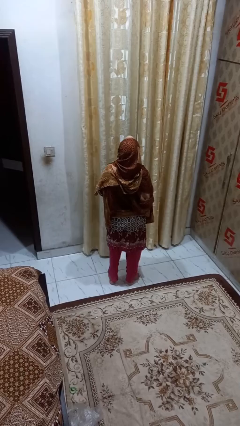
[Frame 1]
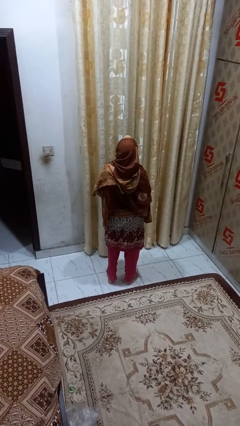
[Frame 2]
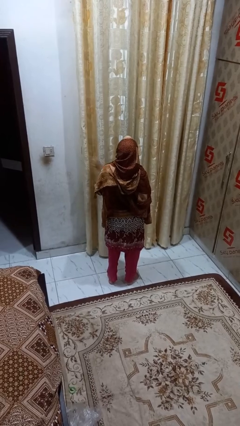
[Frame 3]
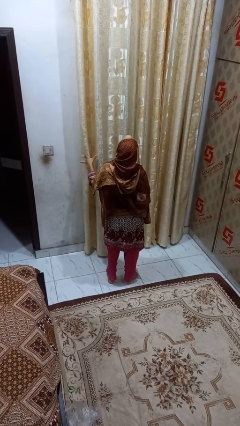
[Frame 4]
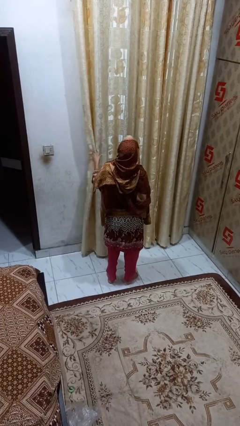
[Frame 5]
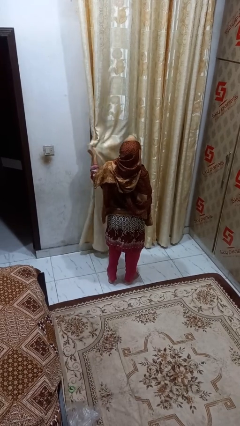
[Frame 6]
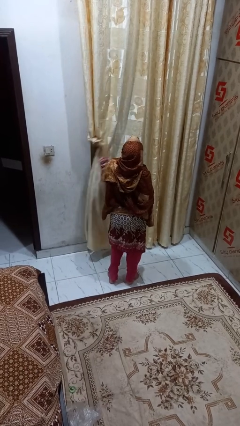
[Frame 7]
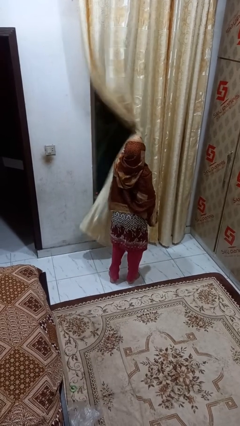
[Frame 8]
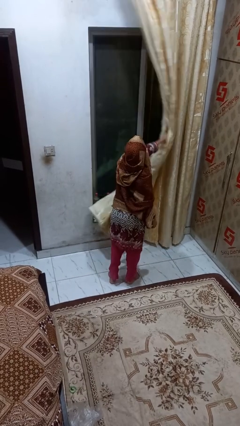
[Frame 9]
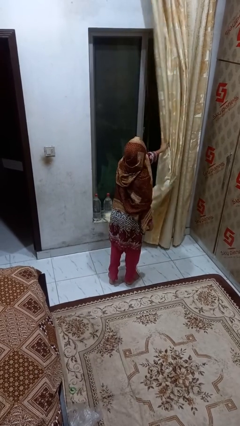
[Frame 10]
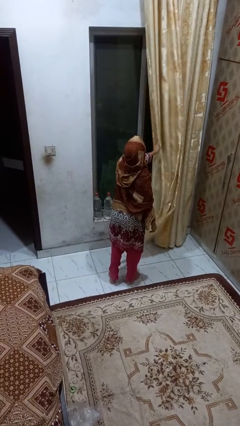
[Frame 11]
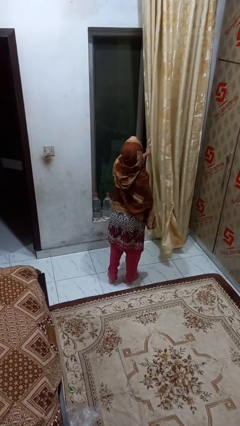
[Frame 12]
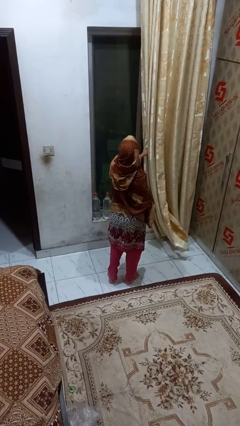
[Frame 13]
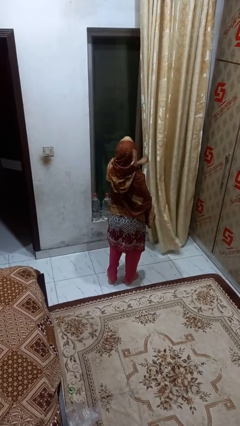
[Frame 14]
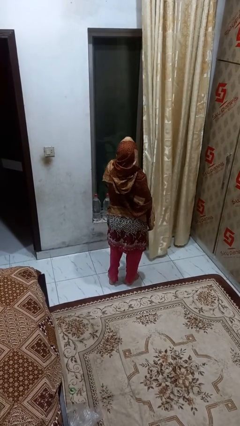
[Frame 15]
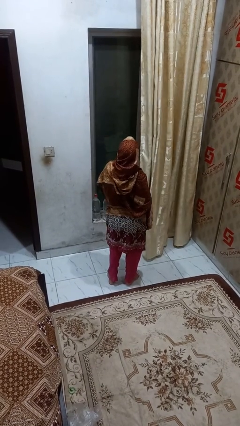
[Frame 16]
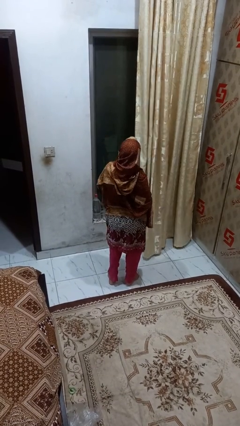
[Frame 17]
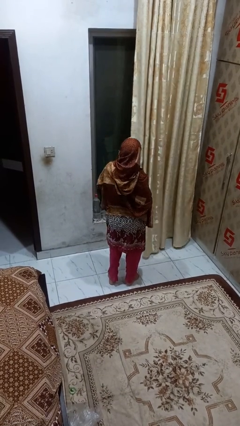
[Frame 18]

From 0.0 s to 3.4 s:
person opens curtains

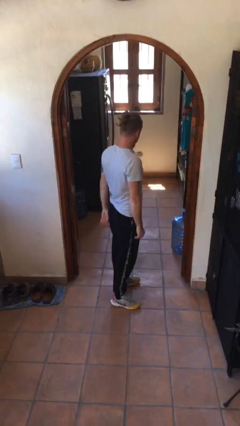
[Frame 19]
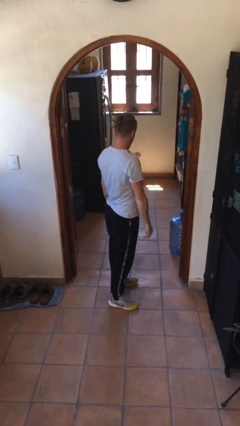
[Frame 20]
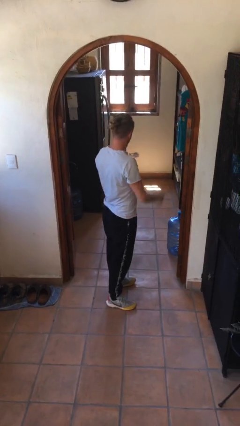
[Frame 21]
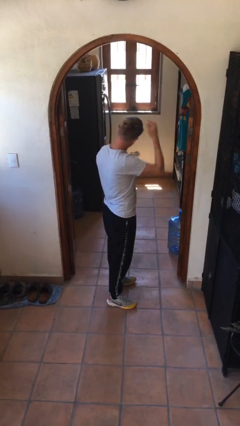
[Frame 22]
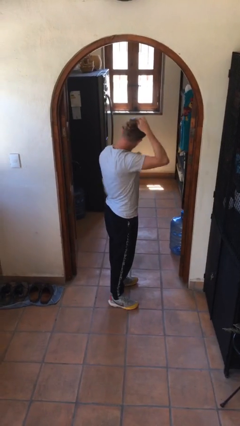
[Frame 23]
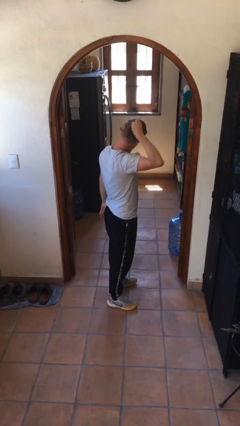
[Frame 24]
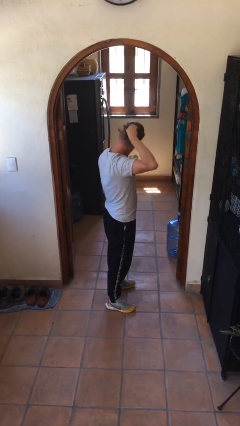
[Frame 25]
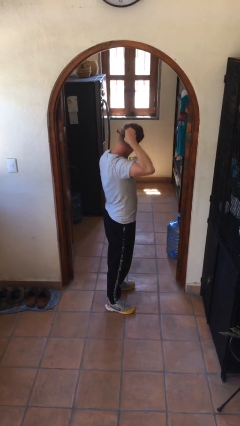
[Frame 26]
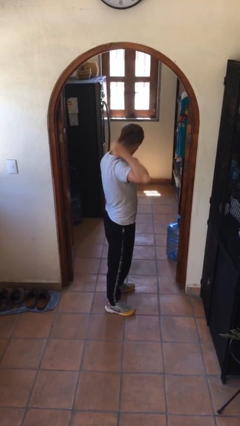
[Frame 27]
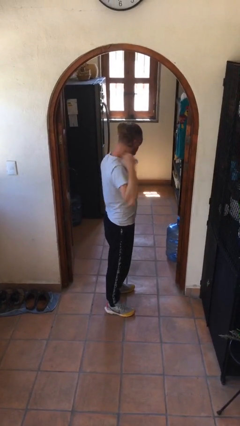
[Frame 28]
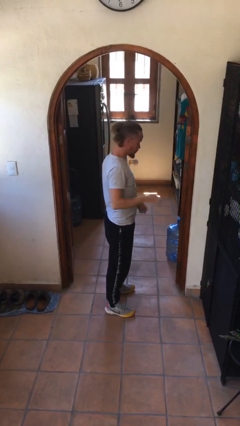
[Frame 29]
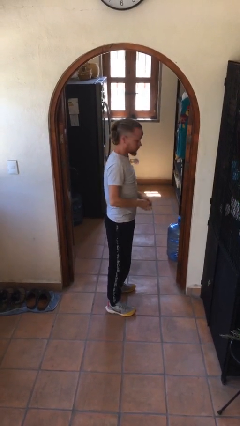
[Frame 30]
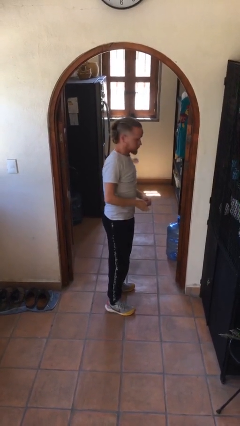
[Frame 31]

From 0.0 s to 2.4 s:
person takes off hairtie

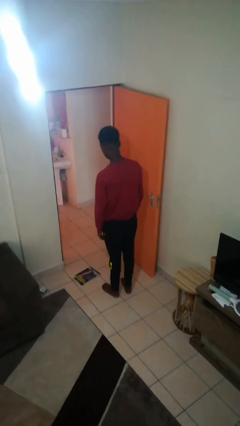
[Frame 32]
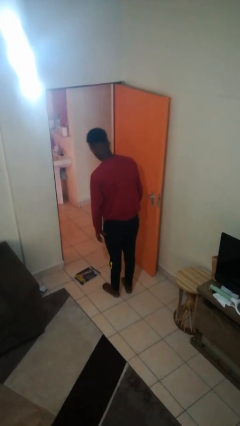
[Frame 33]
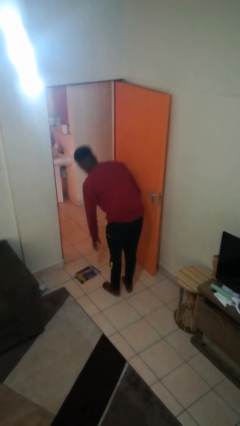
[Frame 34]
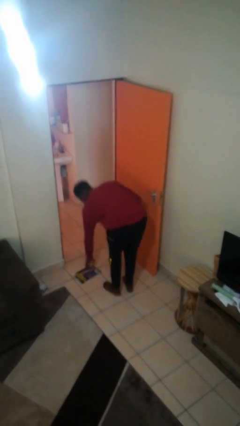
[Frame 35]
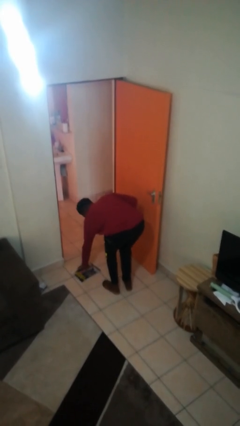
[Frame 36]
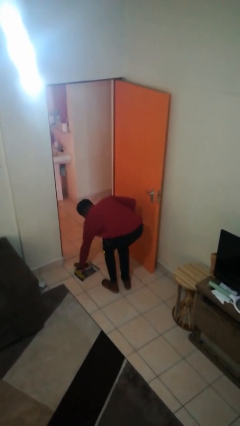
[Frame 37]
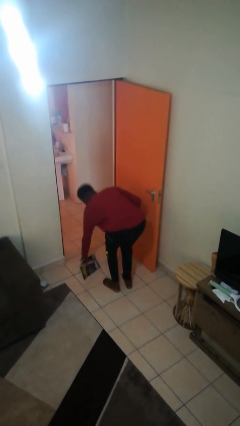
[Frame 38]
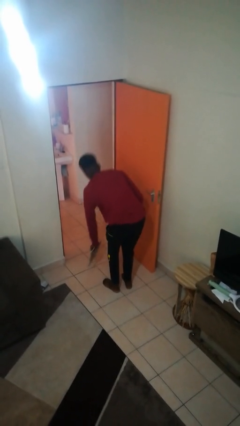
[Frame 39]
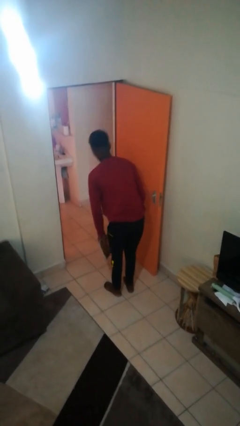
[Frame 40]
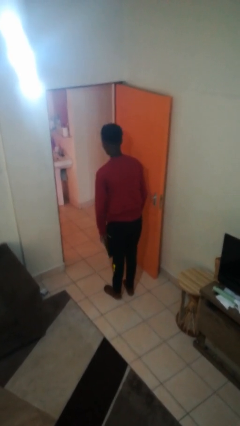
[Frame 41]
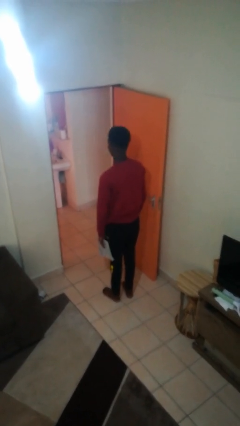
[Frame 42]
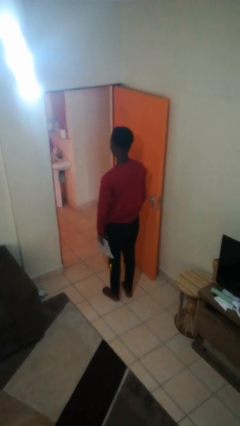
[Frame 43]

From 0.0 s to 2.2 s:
person picks up object from floor

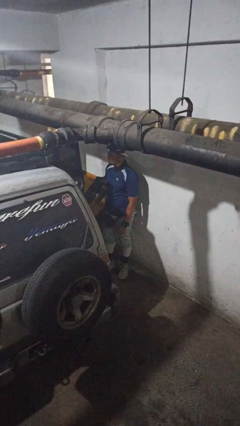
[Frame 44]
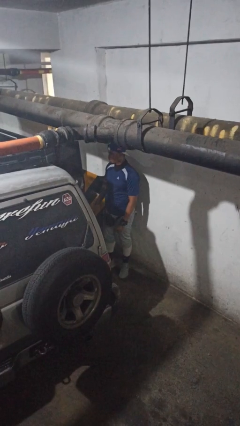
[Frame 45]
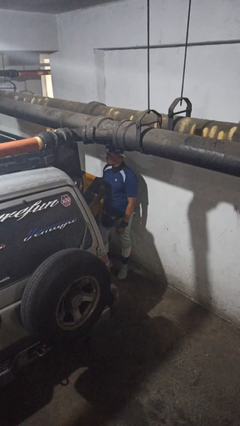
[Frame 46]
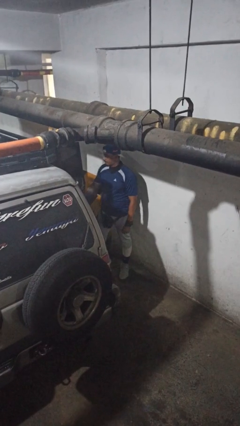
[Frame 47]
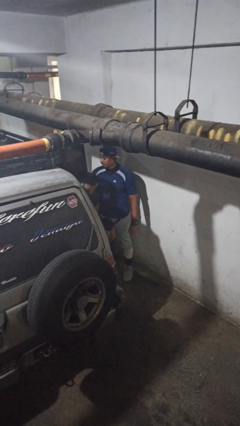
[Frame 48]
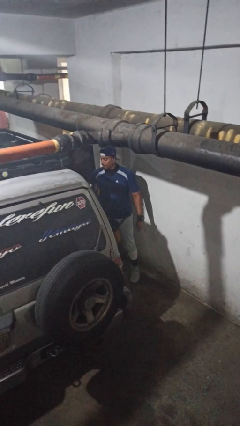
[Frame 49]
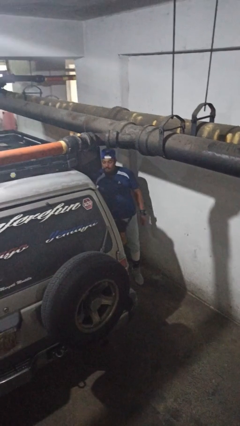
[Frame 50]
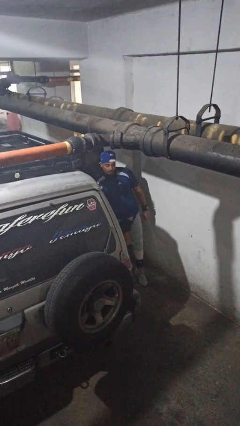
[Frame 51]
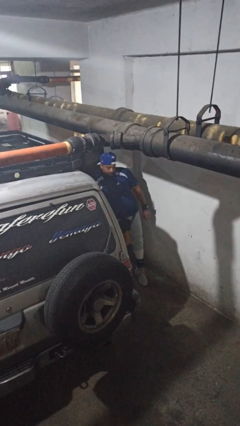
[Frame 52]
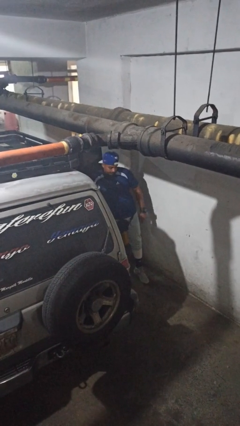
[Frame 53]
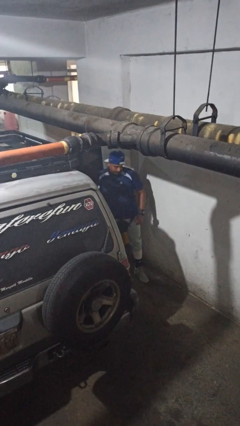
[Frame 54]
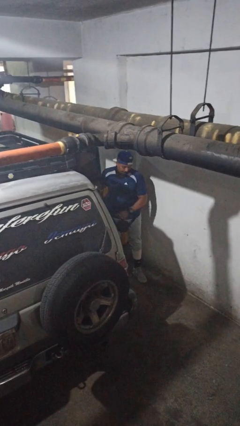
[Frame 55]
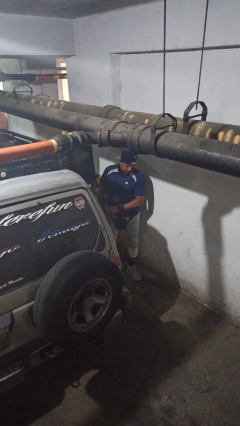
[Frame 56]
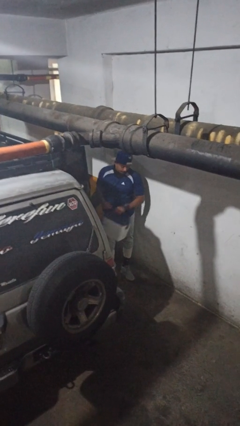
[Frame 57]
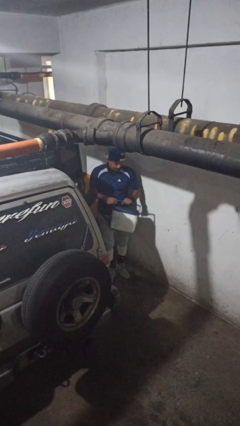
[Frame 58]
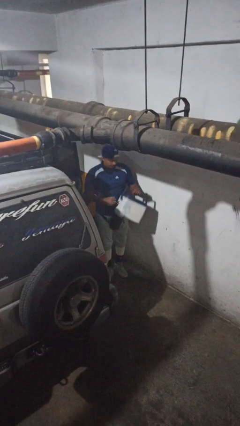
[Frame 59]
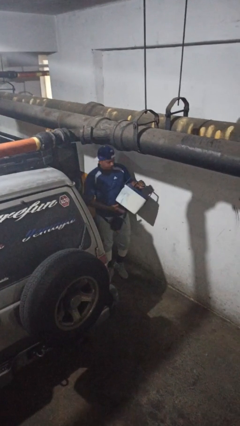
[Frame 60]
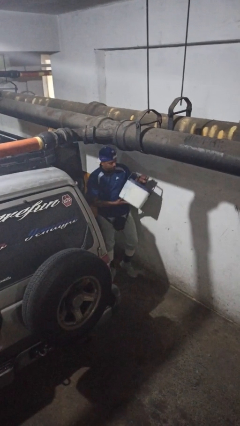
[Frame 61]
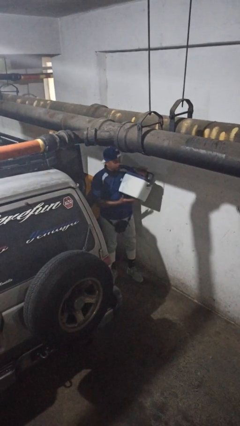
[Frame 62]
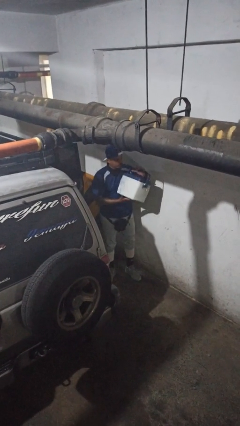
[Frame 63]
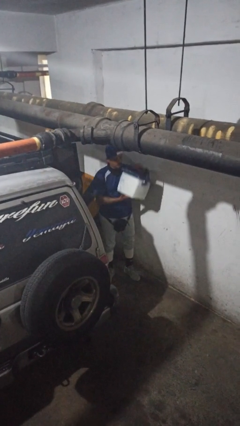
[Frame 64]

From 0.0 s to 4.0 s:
person unloads car

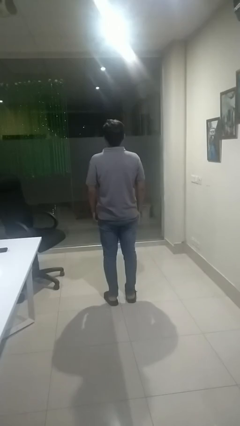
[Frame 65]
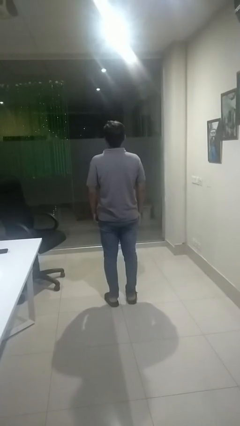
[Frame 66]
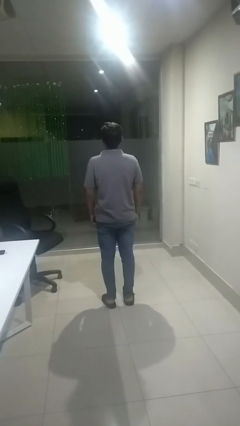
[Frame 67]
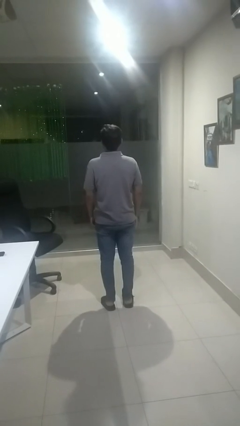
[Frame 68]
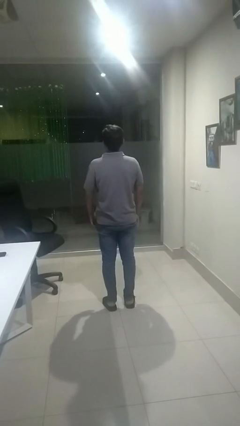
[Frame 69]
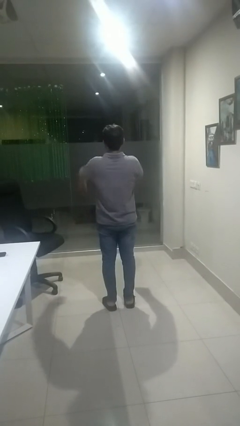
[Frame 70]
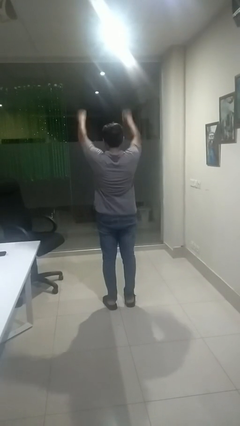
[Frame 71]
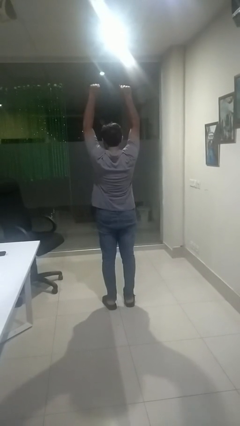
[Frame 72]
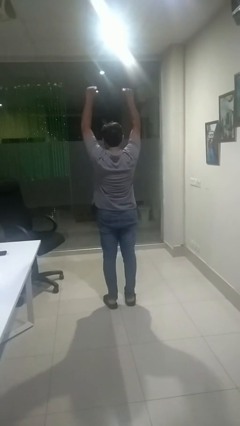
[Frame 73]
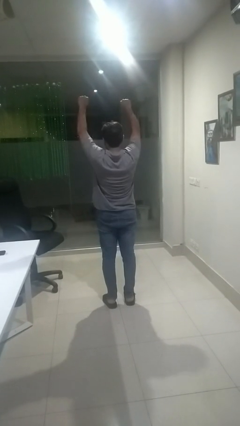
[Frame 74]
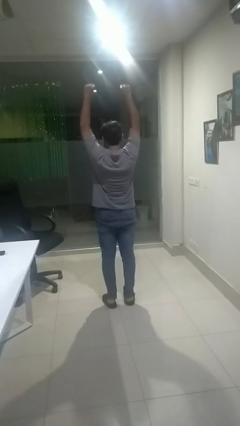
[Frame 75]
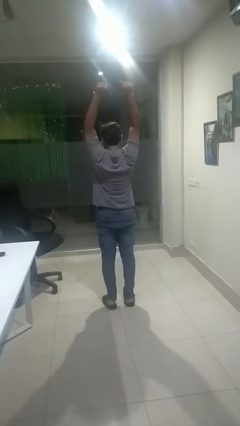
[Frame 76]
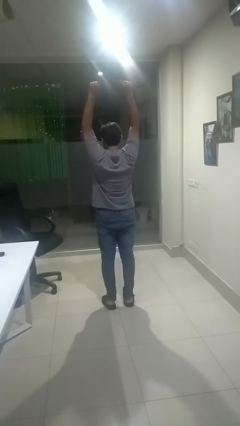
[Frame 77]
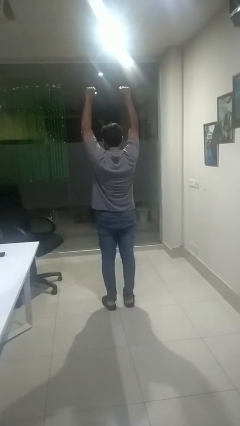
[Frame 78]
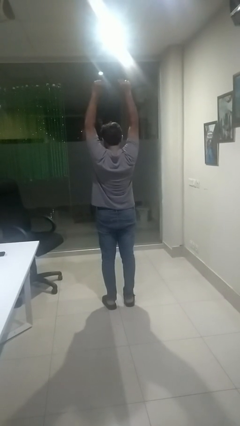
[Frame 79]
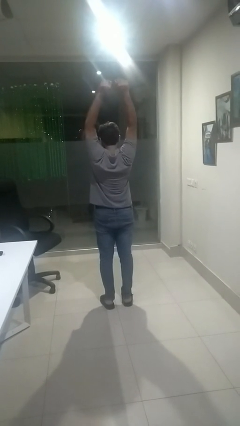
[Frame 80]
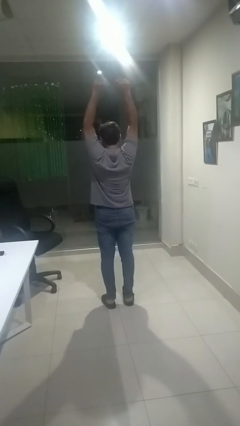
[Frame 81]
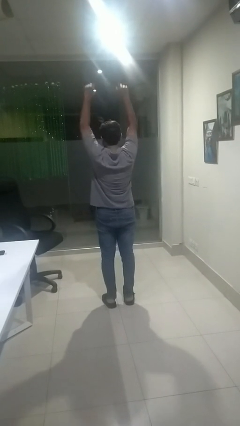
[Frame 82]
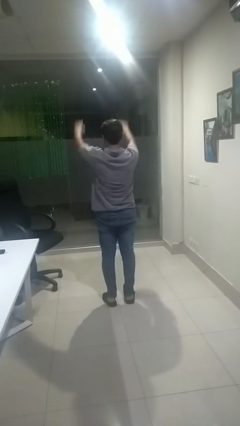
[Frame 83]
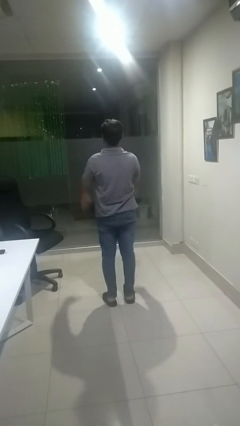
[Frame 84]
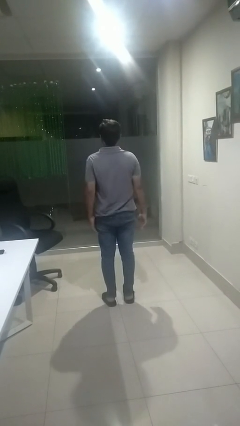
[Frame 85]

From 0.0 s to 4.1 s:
person stretches arms over head

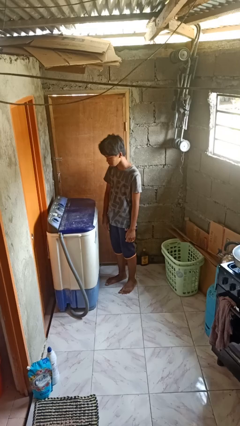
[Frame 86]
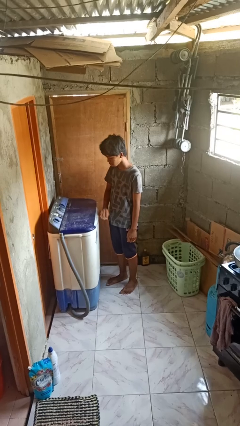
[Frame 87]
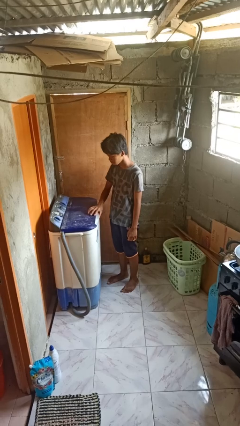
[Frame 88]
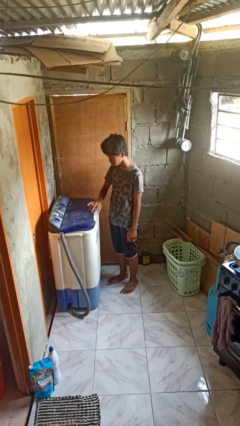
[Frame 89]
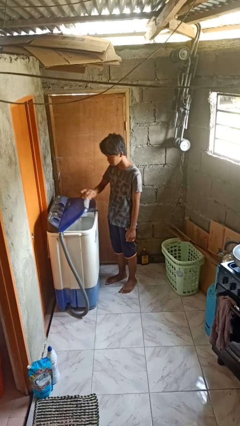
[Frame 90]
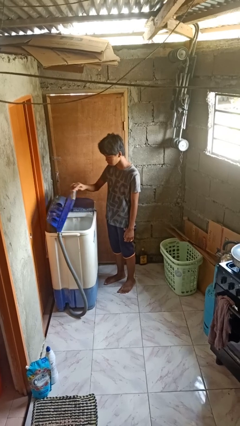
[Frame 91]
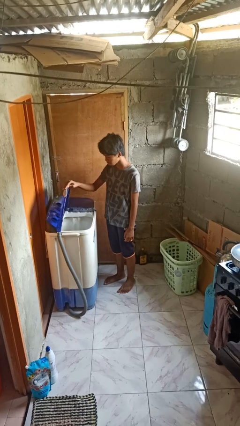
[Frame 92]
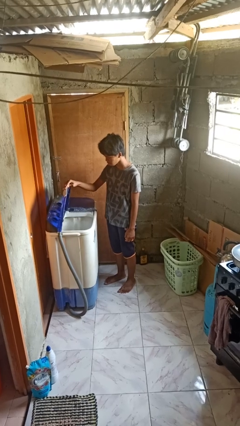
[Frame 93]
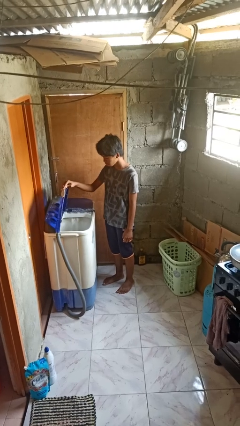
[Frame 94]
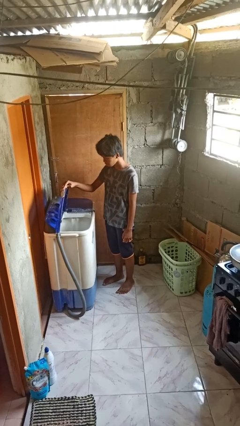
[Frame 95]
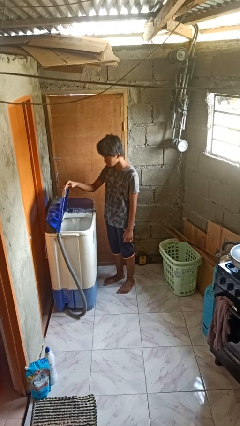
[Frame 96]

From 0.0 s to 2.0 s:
person opens clothes washer
